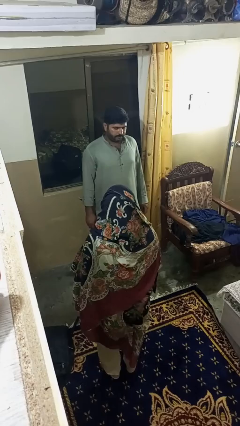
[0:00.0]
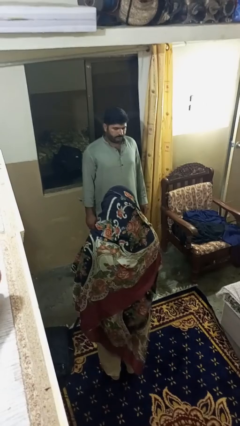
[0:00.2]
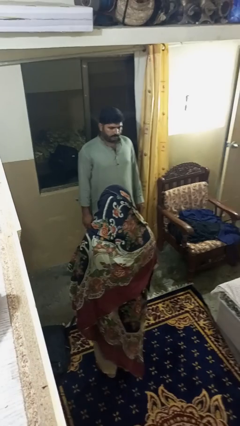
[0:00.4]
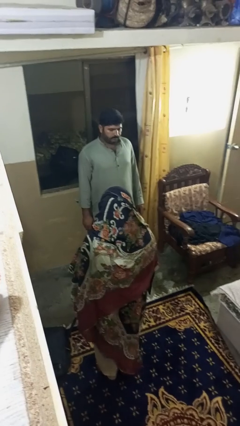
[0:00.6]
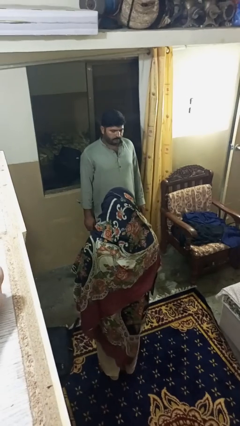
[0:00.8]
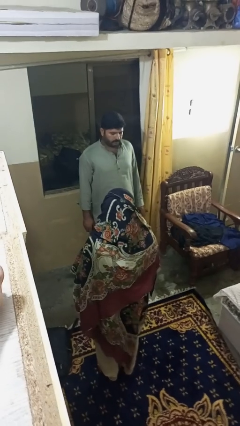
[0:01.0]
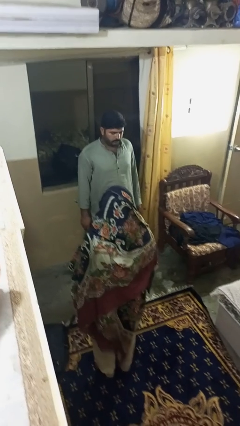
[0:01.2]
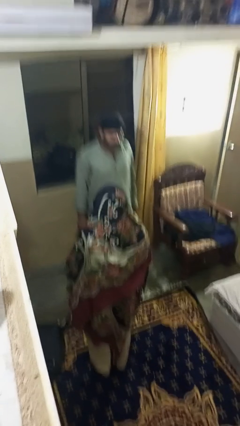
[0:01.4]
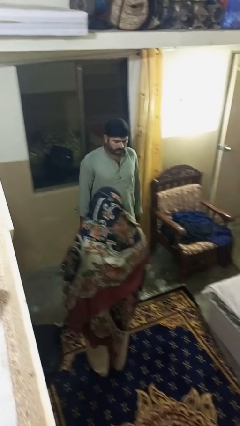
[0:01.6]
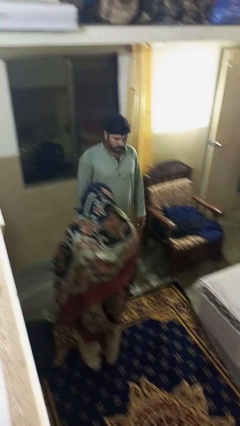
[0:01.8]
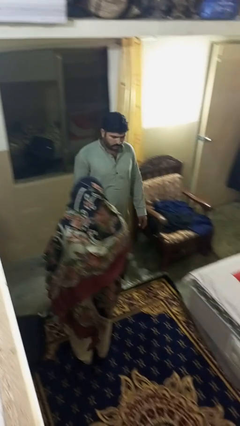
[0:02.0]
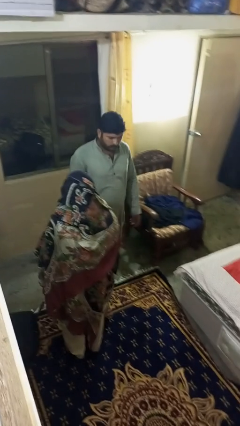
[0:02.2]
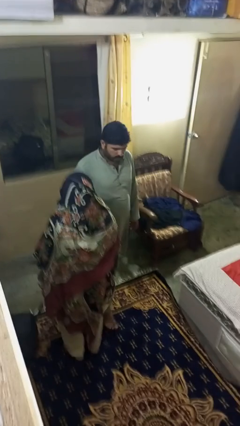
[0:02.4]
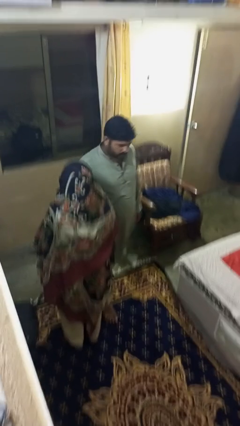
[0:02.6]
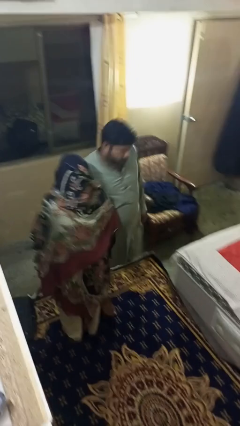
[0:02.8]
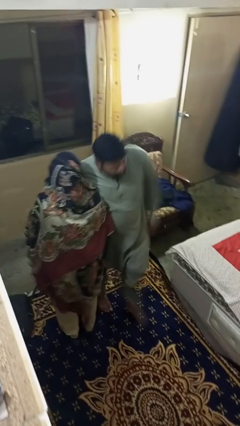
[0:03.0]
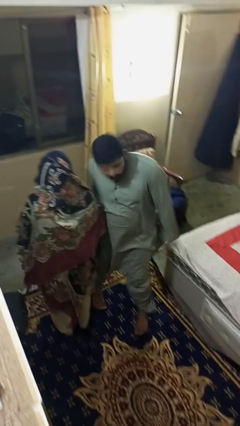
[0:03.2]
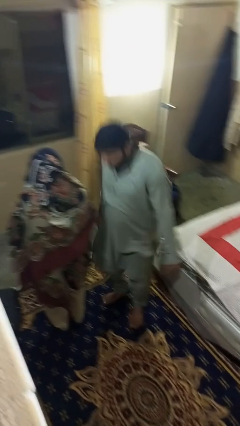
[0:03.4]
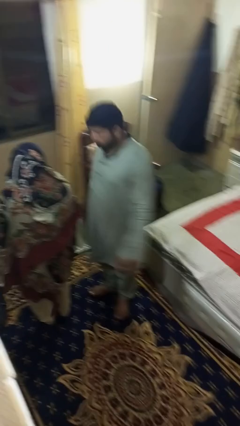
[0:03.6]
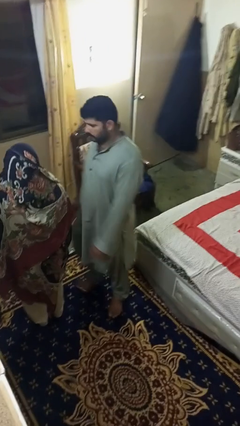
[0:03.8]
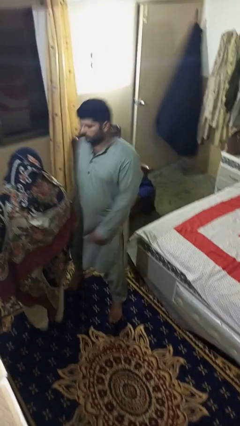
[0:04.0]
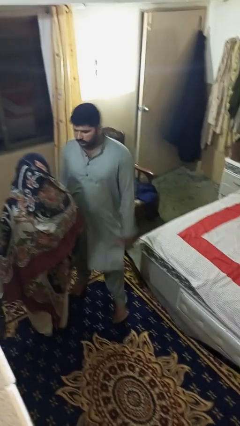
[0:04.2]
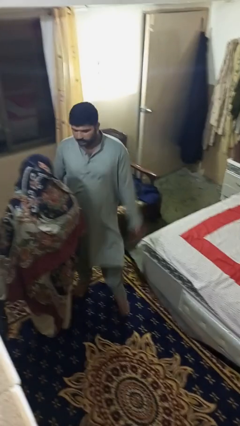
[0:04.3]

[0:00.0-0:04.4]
person bumps into person

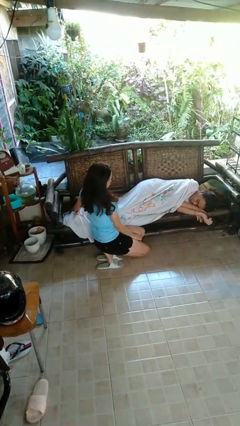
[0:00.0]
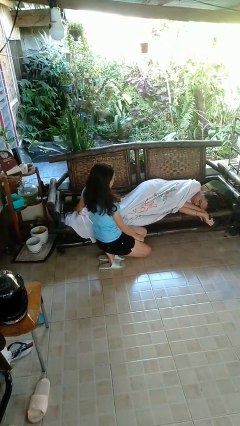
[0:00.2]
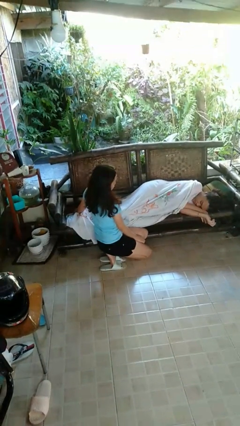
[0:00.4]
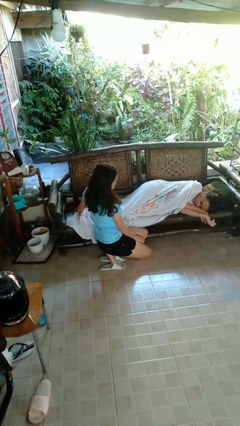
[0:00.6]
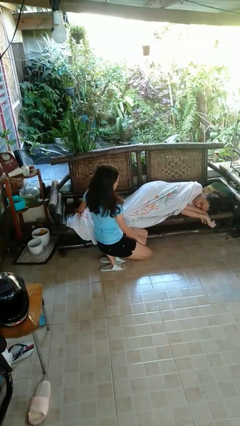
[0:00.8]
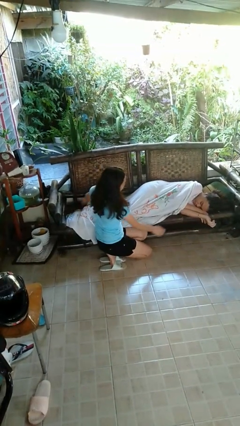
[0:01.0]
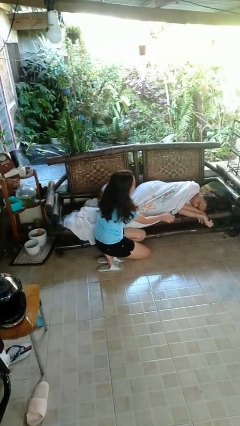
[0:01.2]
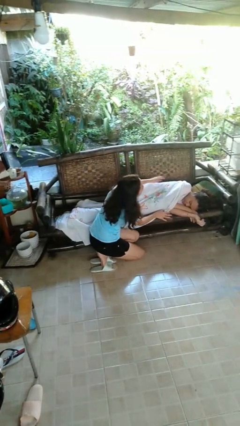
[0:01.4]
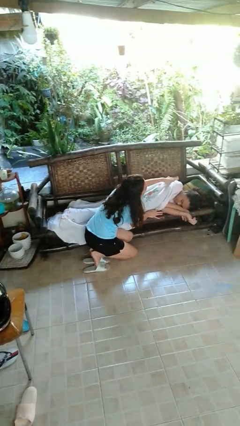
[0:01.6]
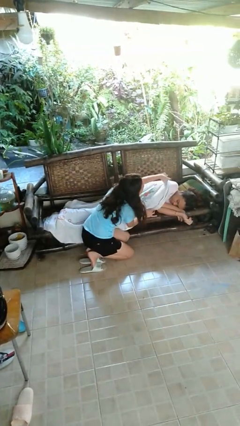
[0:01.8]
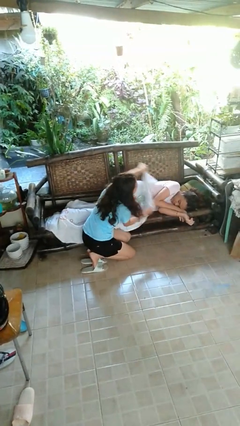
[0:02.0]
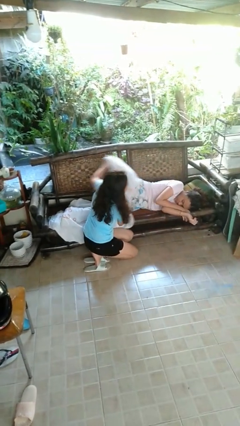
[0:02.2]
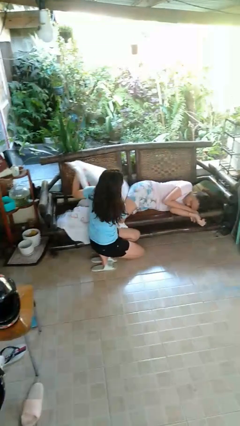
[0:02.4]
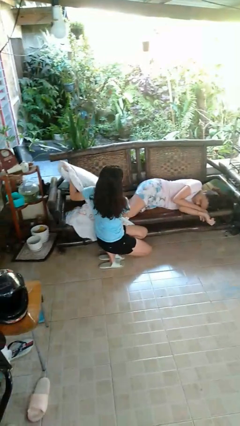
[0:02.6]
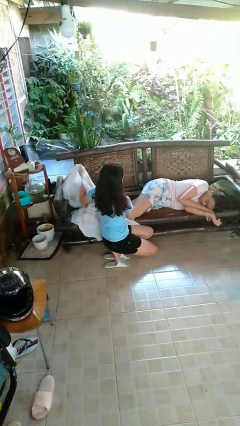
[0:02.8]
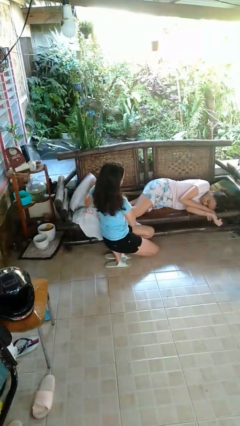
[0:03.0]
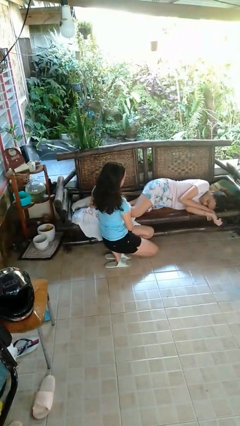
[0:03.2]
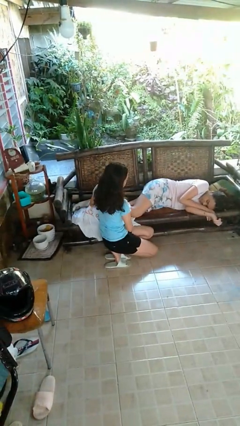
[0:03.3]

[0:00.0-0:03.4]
person uncovers friend with blanket

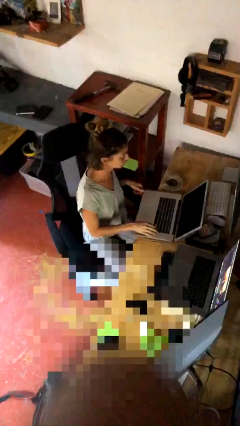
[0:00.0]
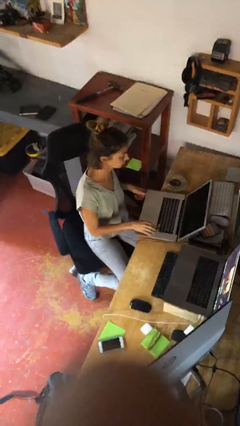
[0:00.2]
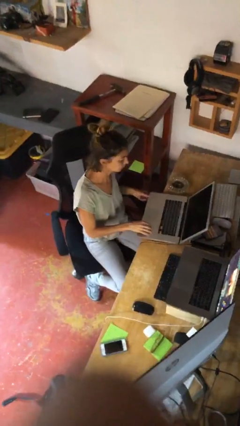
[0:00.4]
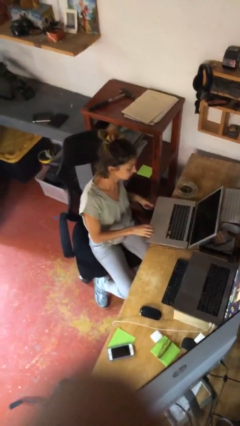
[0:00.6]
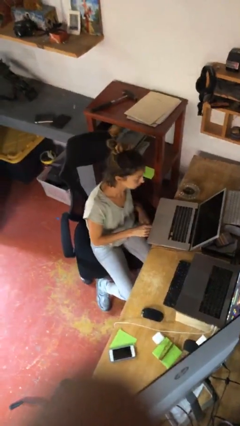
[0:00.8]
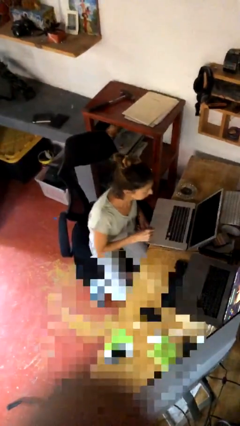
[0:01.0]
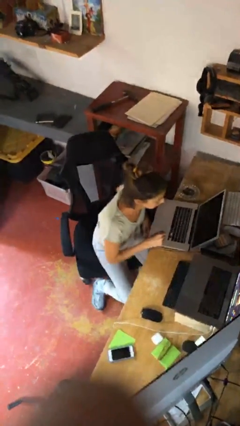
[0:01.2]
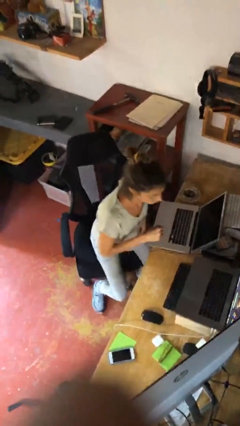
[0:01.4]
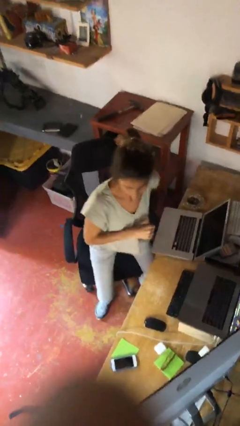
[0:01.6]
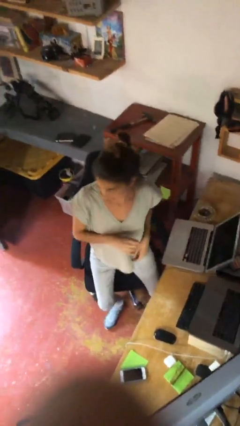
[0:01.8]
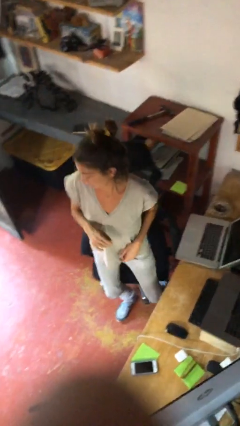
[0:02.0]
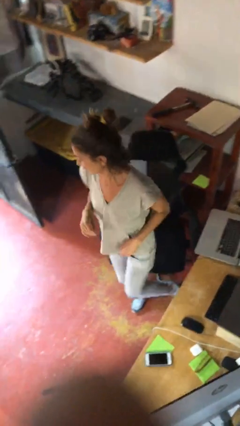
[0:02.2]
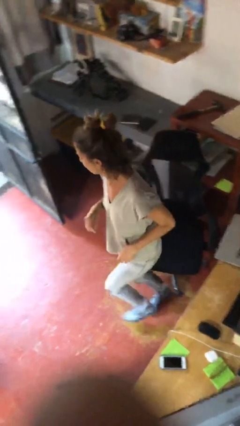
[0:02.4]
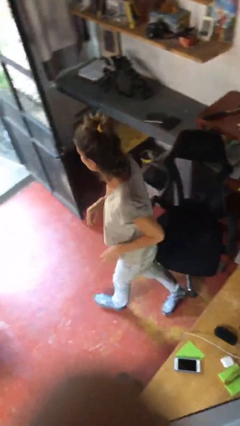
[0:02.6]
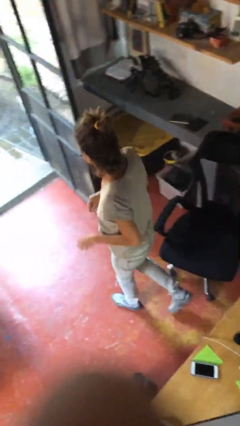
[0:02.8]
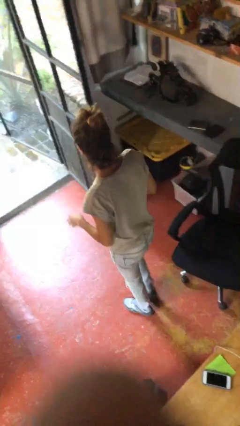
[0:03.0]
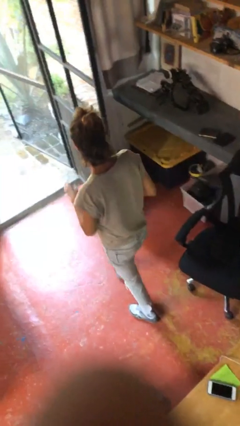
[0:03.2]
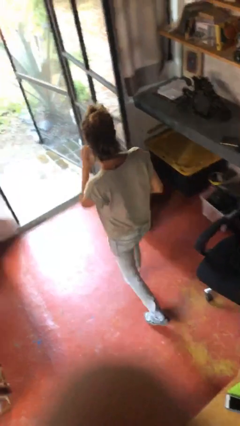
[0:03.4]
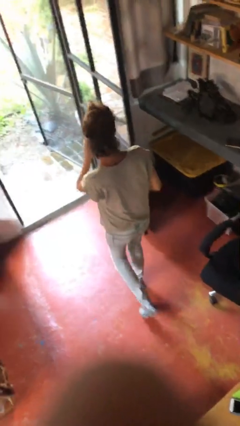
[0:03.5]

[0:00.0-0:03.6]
person stands up

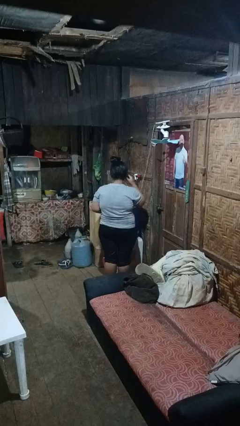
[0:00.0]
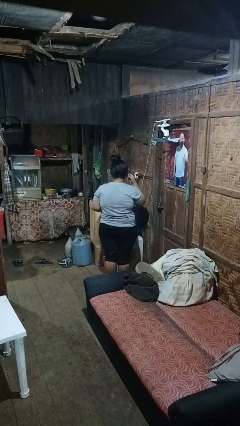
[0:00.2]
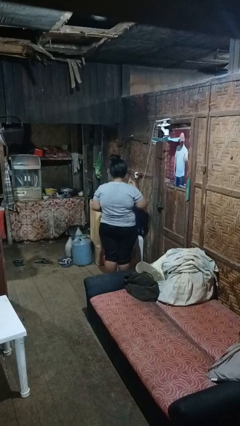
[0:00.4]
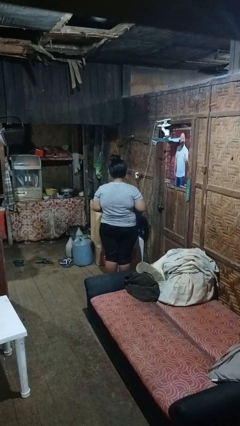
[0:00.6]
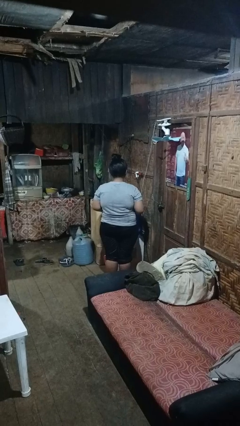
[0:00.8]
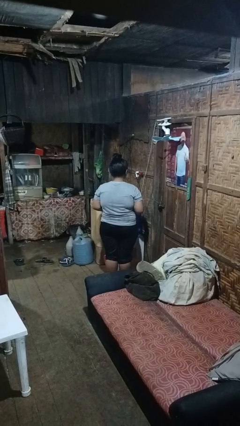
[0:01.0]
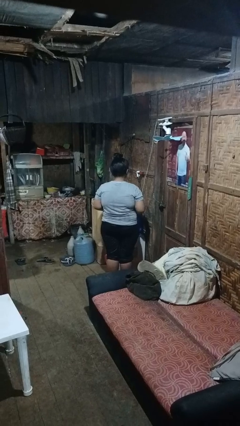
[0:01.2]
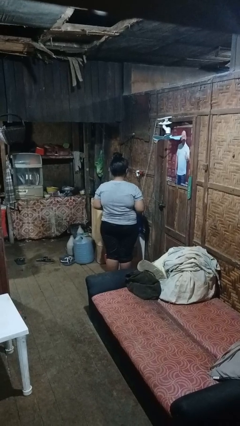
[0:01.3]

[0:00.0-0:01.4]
person takes off headphones

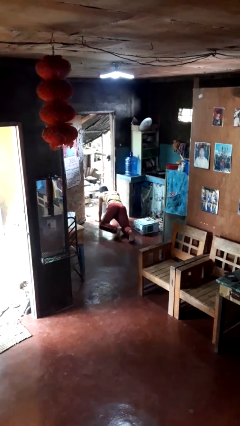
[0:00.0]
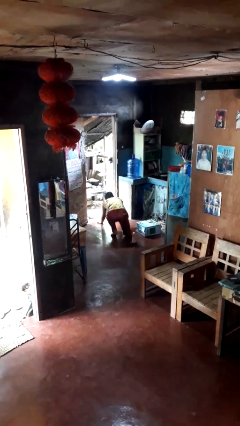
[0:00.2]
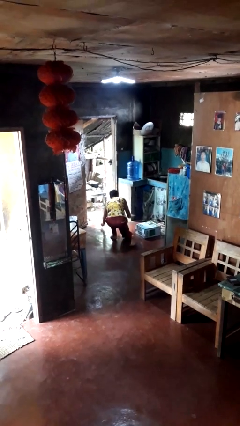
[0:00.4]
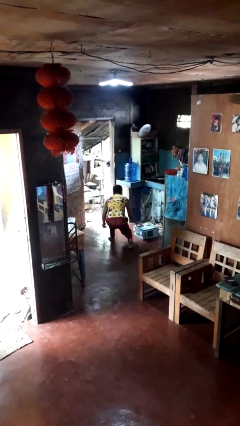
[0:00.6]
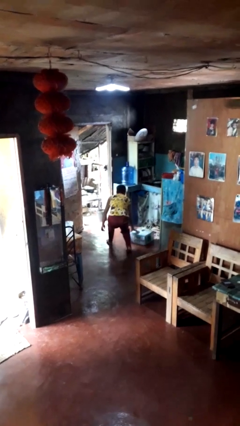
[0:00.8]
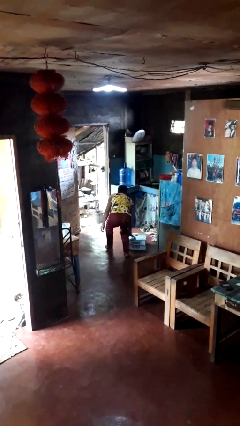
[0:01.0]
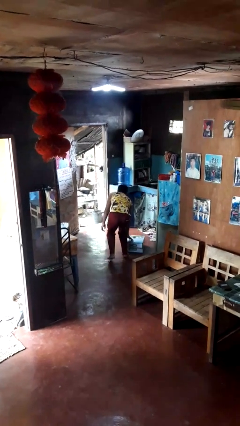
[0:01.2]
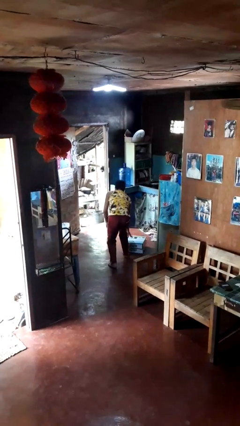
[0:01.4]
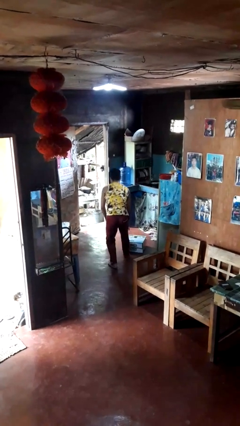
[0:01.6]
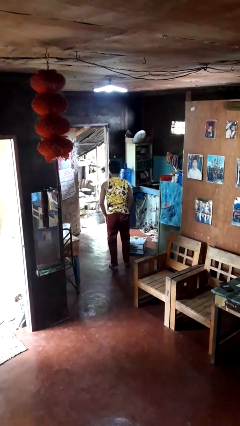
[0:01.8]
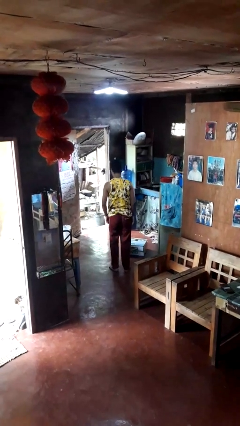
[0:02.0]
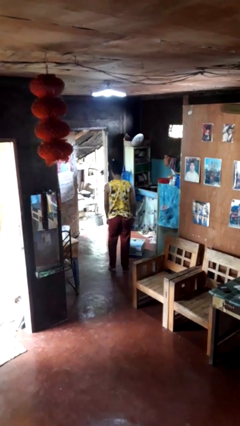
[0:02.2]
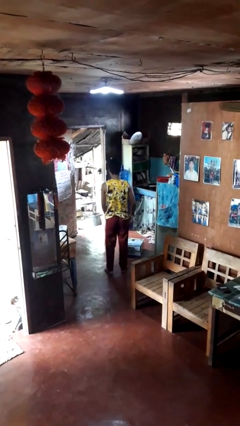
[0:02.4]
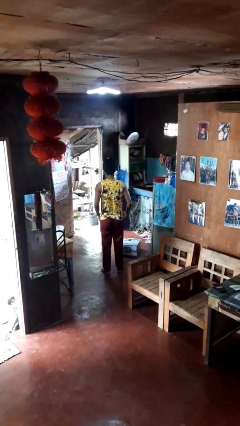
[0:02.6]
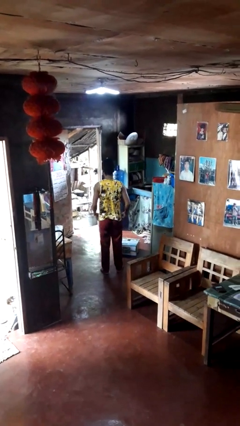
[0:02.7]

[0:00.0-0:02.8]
person stands up from floor

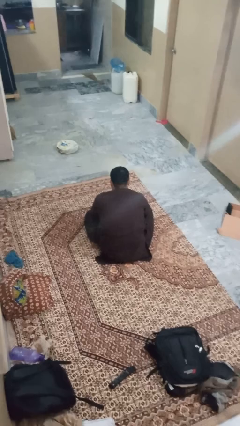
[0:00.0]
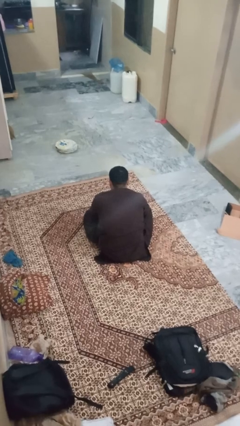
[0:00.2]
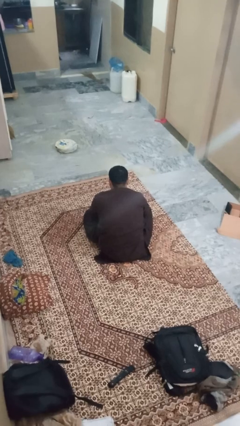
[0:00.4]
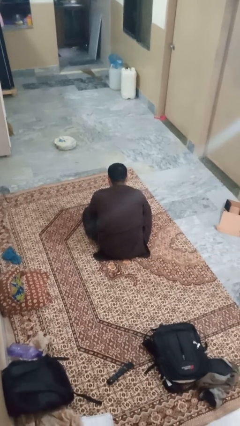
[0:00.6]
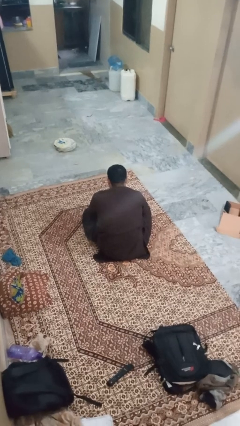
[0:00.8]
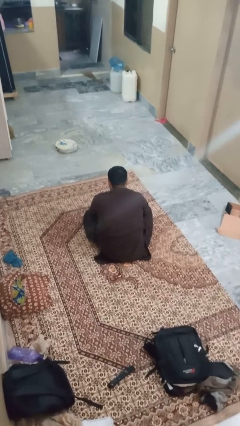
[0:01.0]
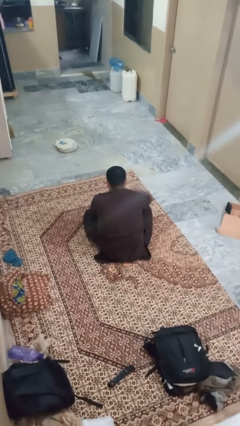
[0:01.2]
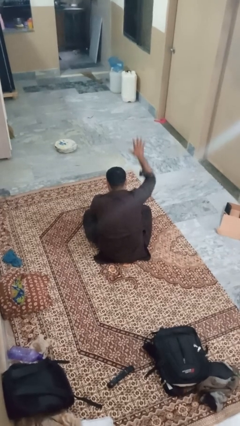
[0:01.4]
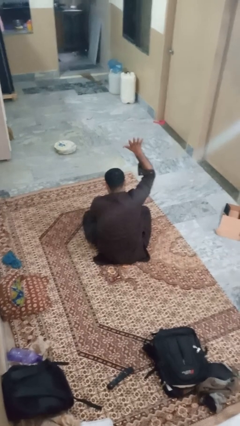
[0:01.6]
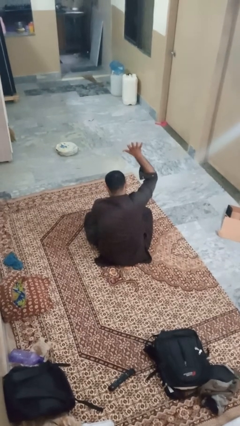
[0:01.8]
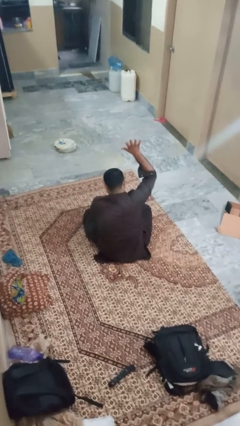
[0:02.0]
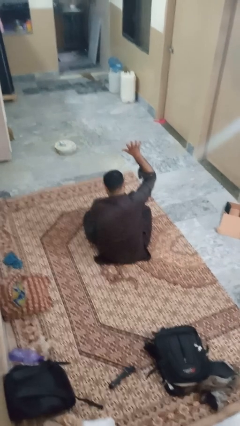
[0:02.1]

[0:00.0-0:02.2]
person gestures number five
